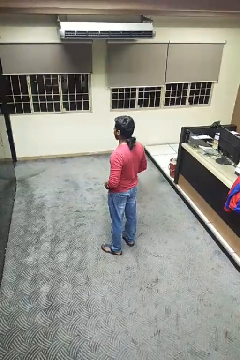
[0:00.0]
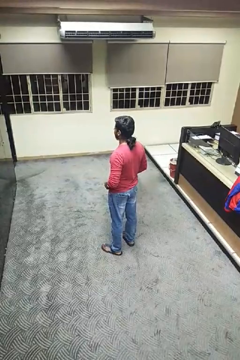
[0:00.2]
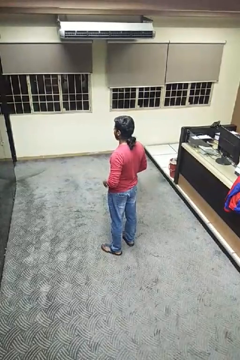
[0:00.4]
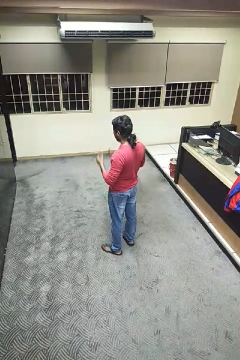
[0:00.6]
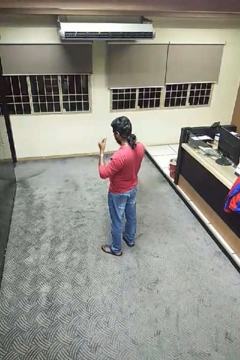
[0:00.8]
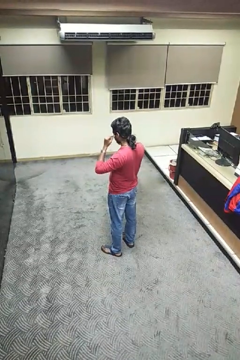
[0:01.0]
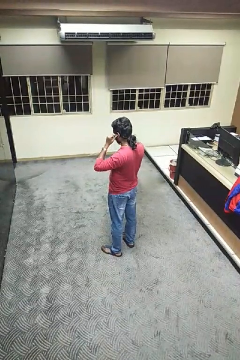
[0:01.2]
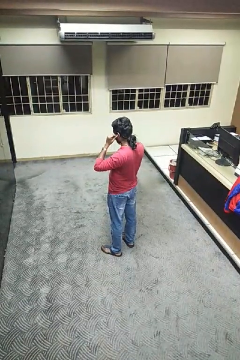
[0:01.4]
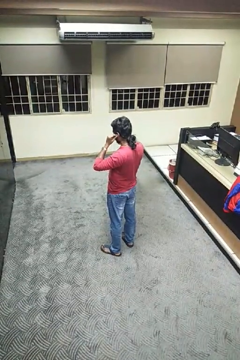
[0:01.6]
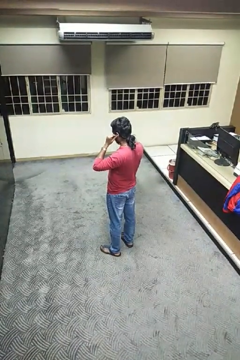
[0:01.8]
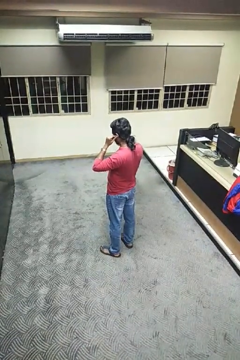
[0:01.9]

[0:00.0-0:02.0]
person puts on headphones

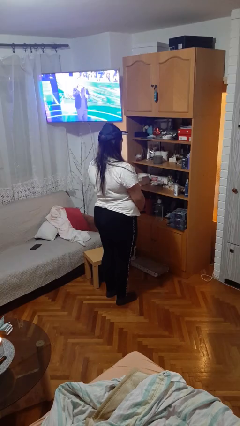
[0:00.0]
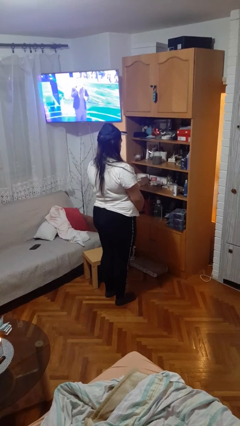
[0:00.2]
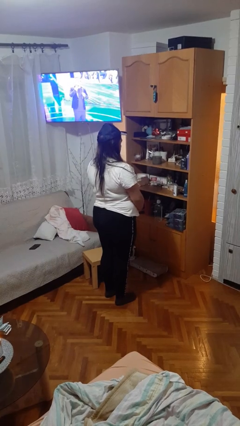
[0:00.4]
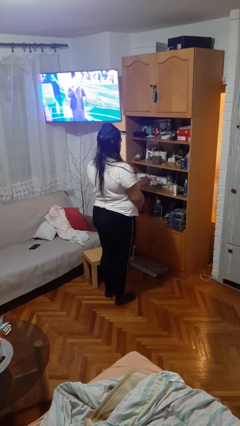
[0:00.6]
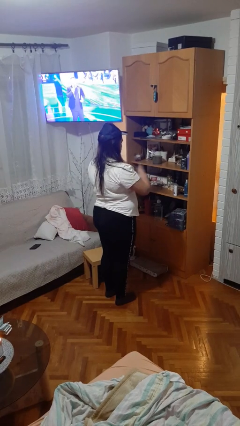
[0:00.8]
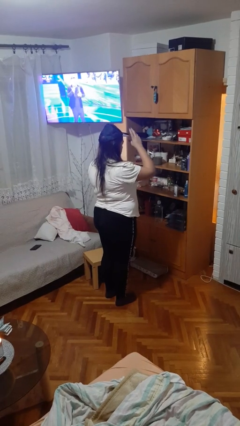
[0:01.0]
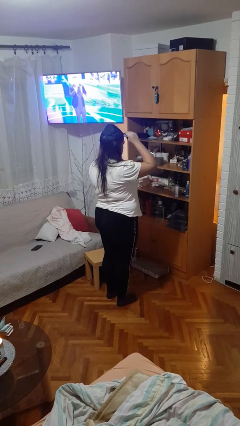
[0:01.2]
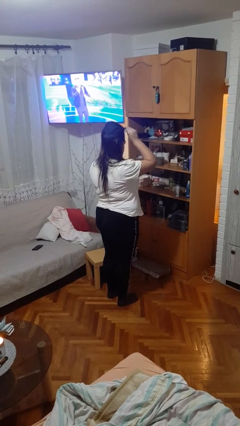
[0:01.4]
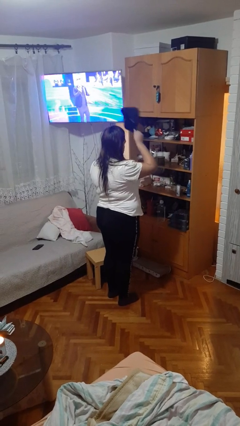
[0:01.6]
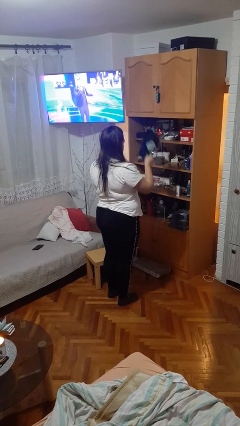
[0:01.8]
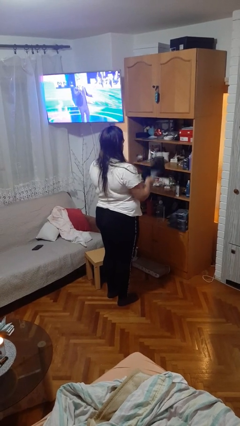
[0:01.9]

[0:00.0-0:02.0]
person takes off hat

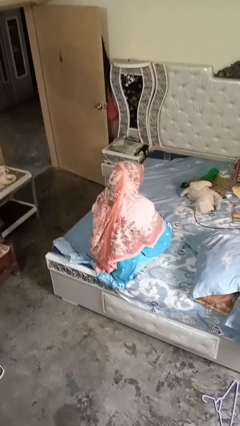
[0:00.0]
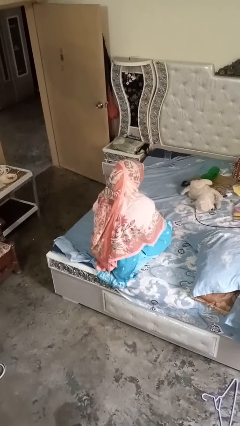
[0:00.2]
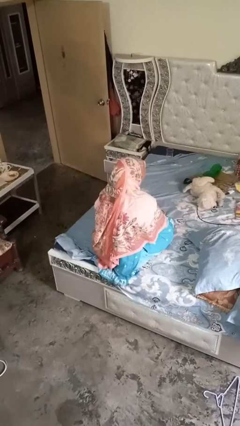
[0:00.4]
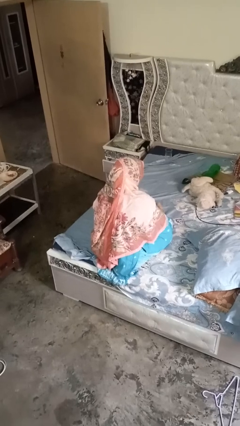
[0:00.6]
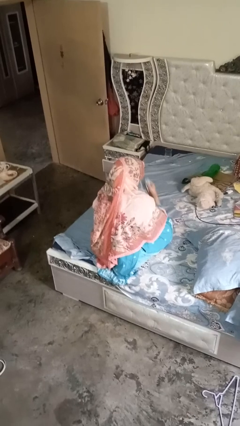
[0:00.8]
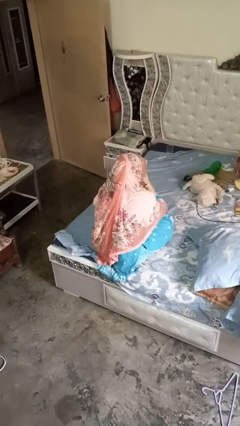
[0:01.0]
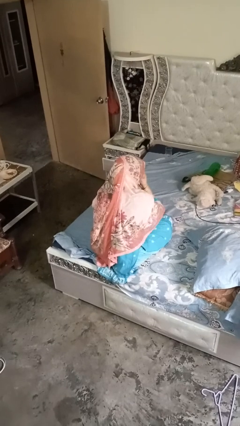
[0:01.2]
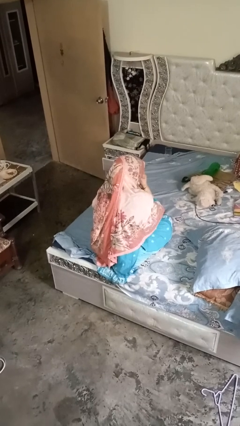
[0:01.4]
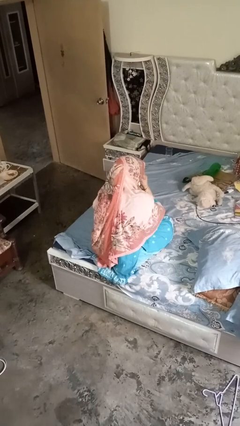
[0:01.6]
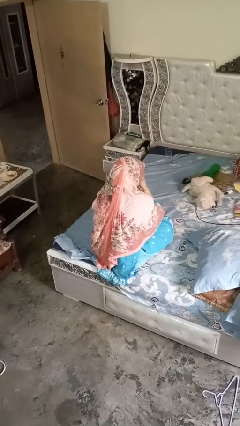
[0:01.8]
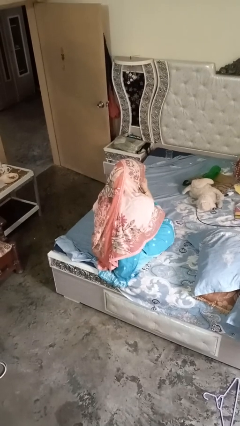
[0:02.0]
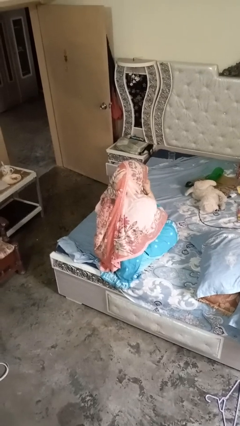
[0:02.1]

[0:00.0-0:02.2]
person blows nose

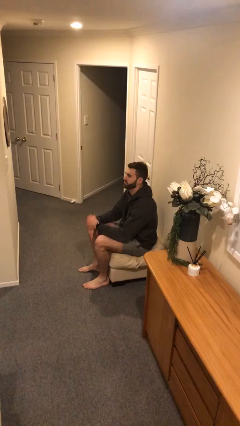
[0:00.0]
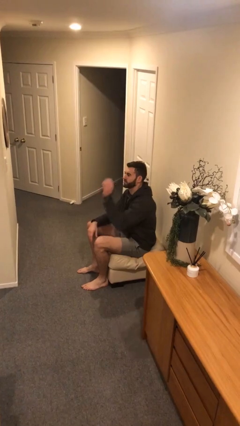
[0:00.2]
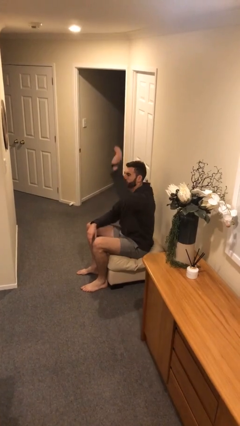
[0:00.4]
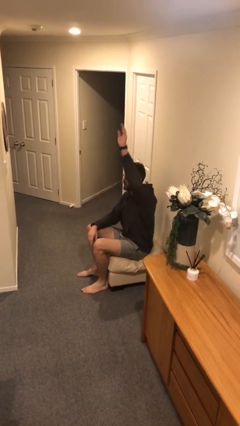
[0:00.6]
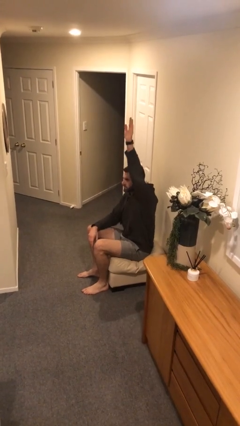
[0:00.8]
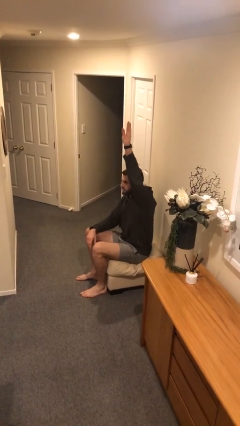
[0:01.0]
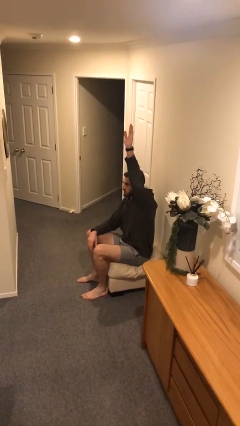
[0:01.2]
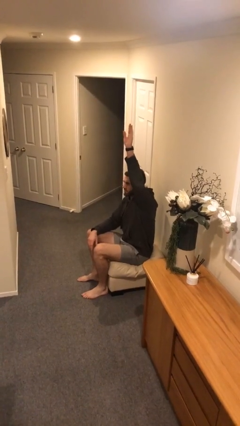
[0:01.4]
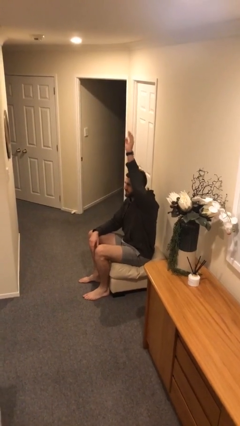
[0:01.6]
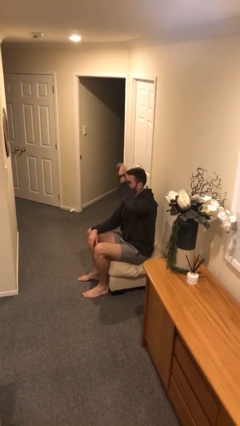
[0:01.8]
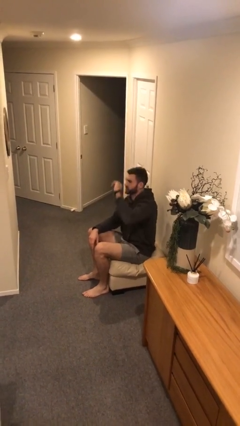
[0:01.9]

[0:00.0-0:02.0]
person gestures raise hand

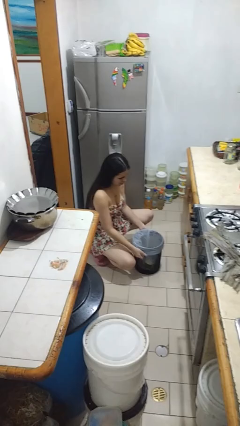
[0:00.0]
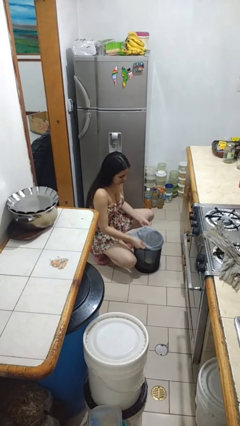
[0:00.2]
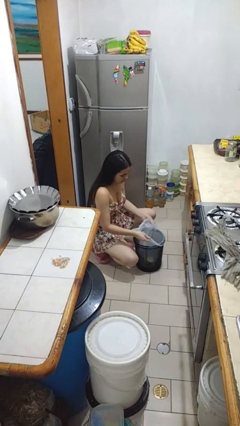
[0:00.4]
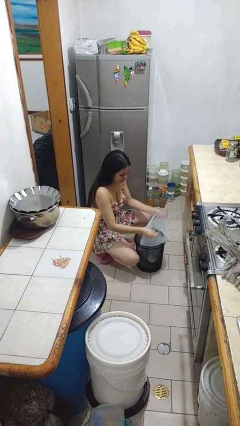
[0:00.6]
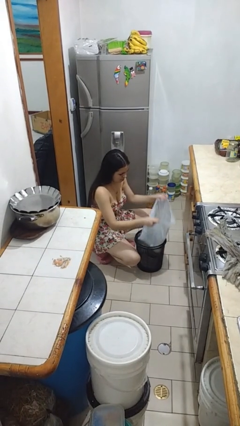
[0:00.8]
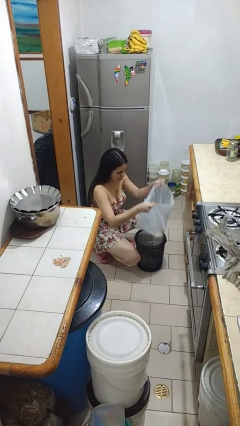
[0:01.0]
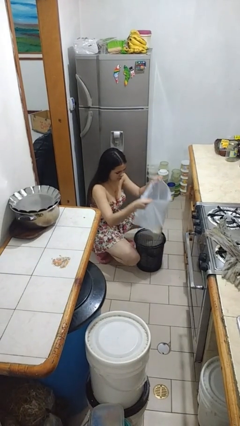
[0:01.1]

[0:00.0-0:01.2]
person removes trashbag from trashcan

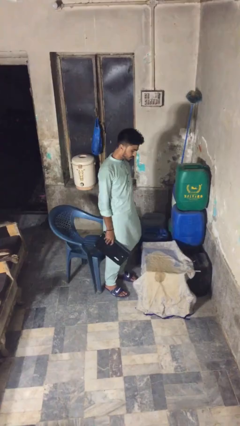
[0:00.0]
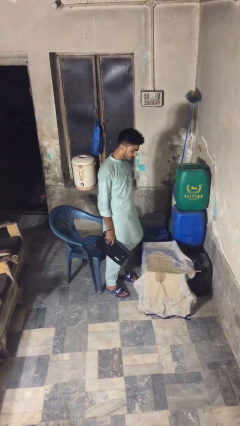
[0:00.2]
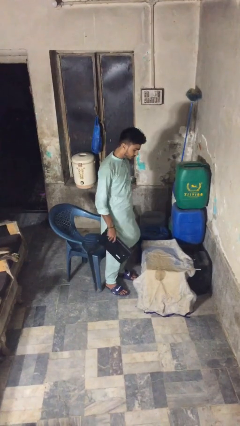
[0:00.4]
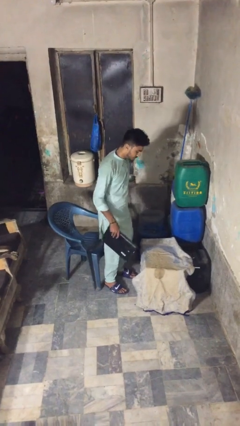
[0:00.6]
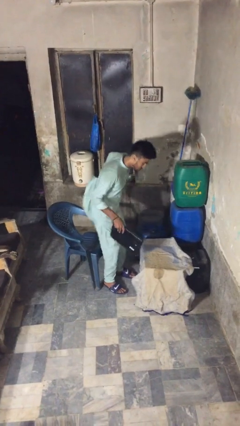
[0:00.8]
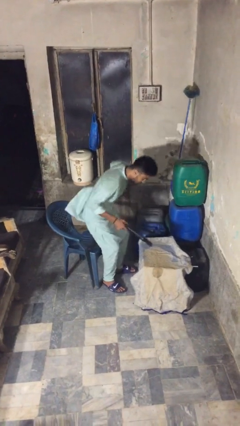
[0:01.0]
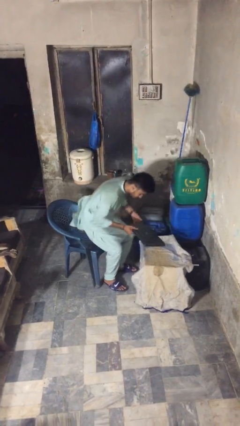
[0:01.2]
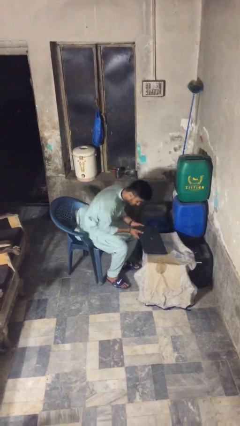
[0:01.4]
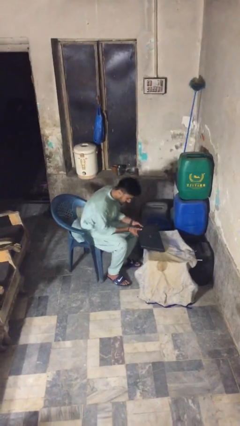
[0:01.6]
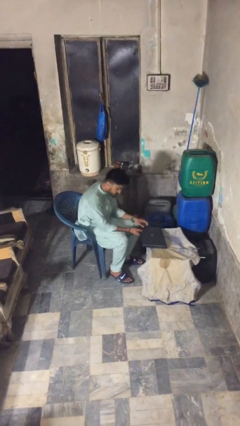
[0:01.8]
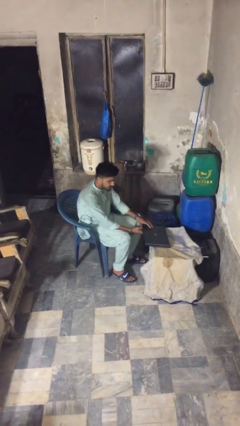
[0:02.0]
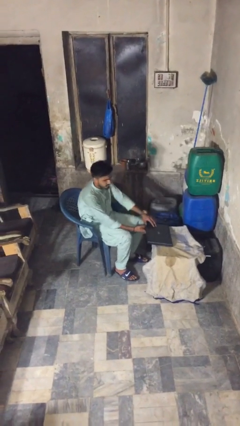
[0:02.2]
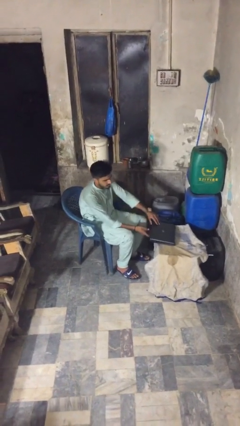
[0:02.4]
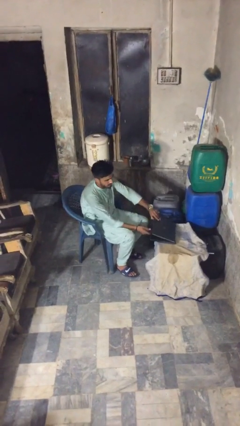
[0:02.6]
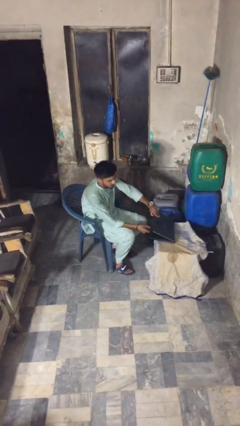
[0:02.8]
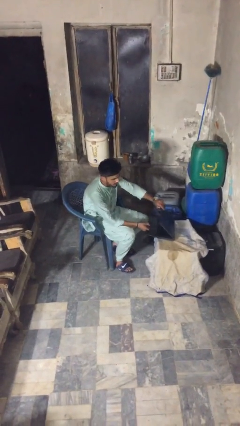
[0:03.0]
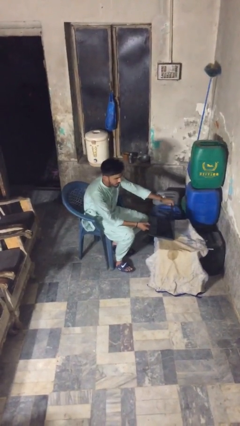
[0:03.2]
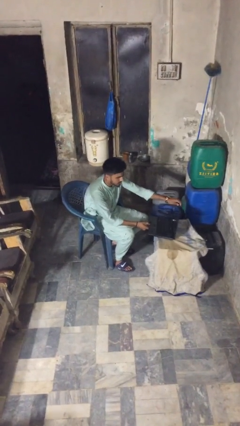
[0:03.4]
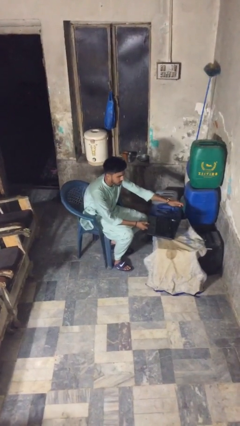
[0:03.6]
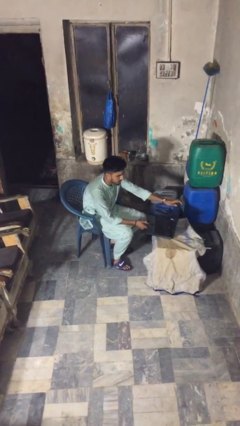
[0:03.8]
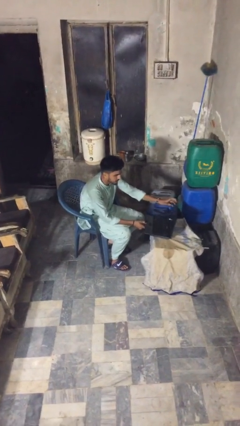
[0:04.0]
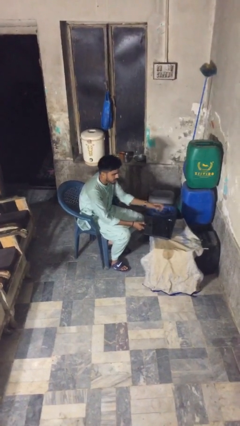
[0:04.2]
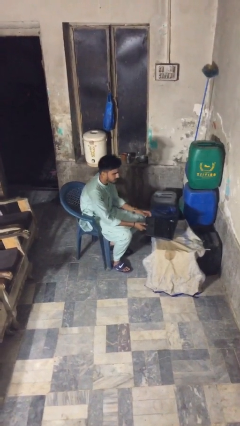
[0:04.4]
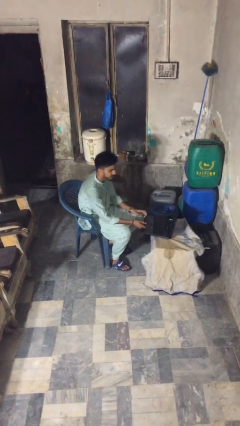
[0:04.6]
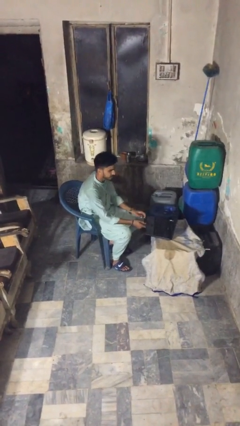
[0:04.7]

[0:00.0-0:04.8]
person sits down

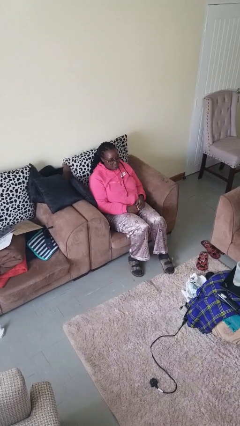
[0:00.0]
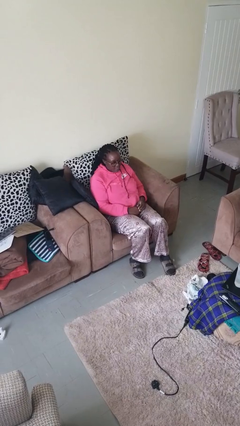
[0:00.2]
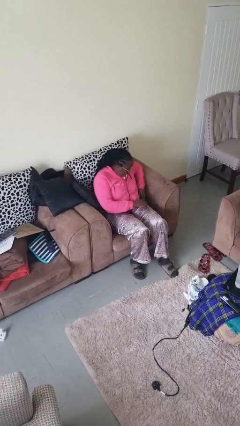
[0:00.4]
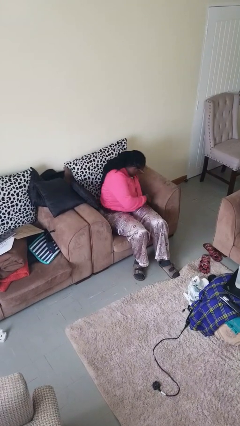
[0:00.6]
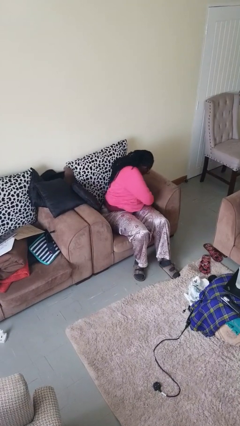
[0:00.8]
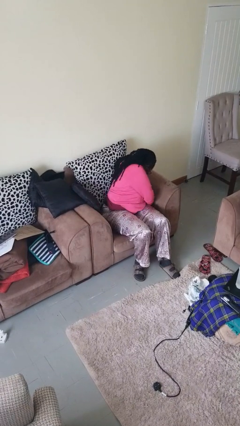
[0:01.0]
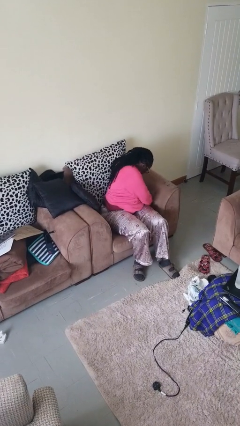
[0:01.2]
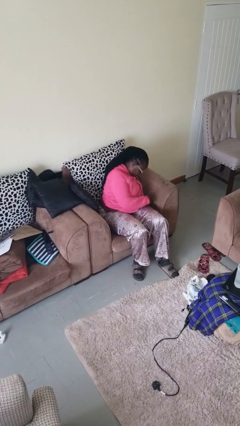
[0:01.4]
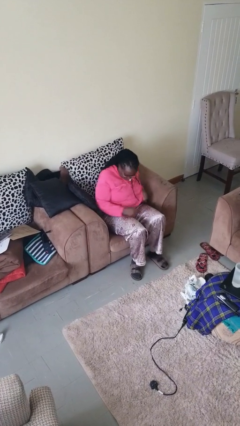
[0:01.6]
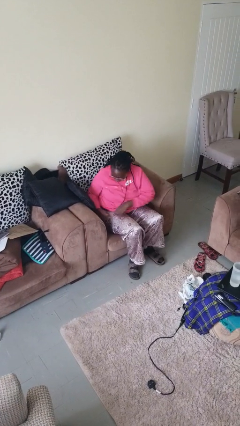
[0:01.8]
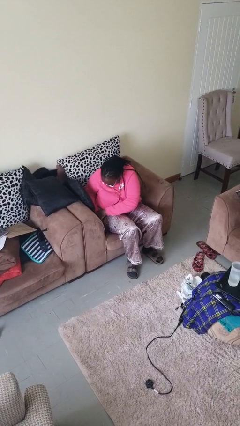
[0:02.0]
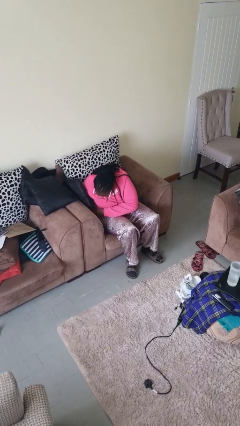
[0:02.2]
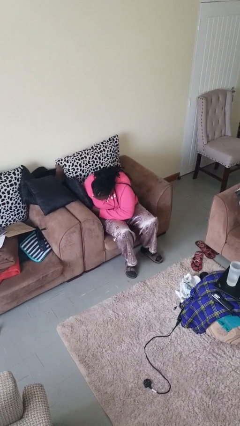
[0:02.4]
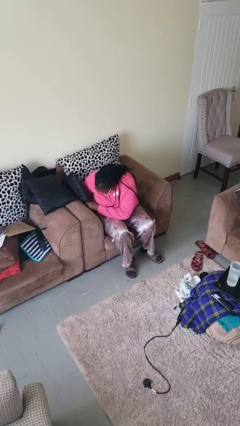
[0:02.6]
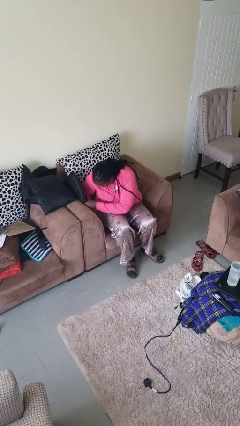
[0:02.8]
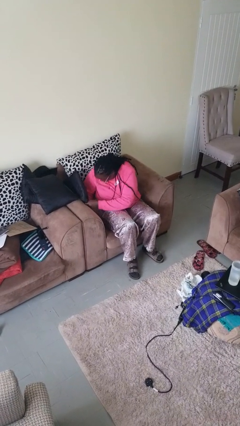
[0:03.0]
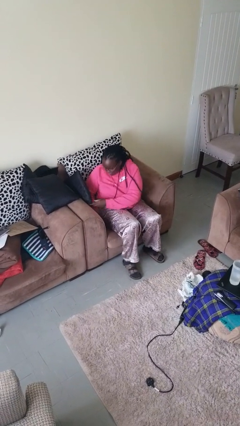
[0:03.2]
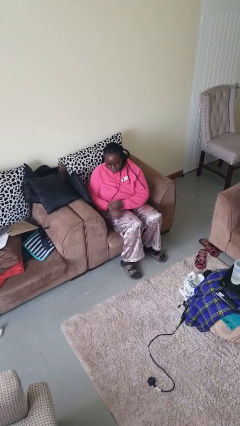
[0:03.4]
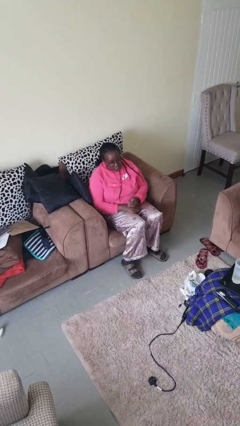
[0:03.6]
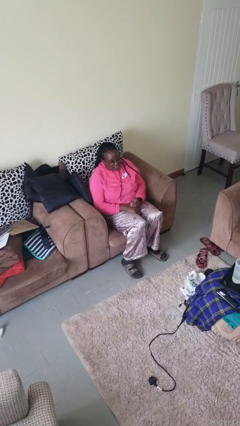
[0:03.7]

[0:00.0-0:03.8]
person searches in couch
